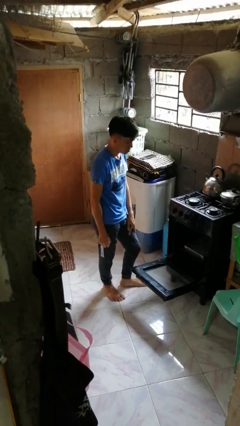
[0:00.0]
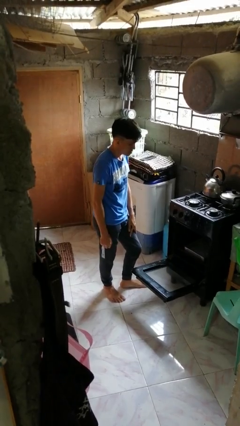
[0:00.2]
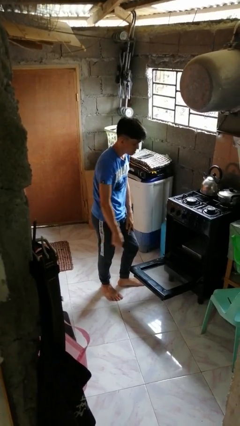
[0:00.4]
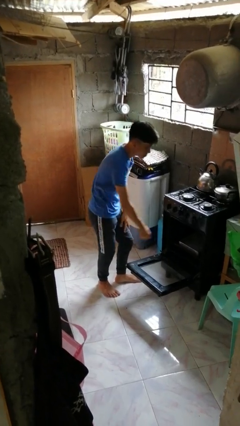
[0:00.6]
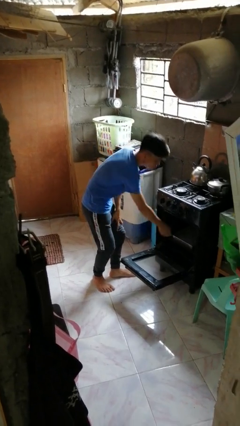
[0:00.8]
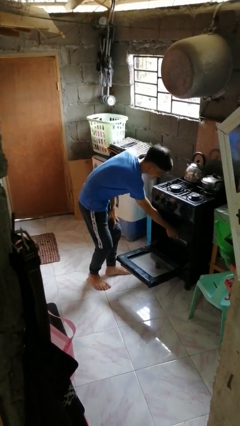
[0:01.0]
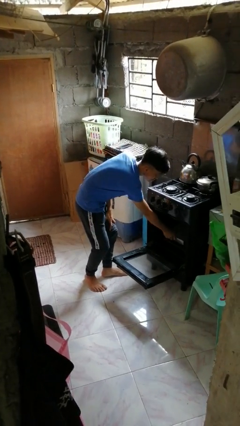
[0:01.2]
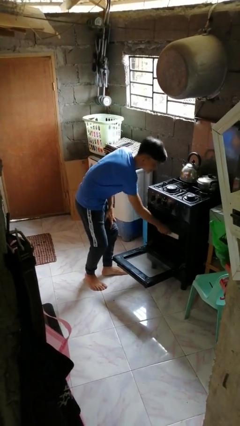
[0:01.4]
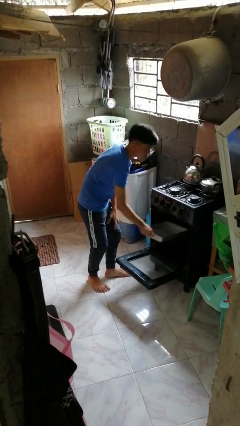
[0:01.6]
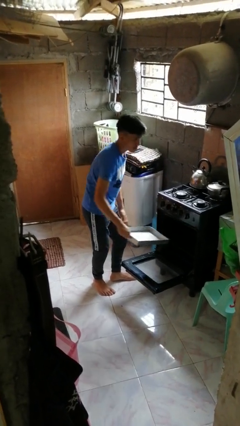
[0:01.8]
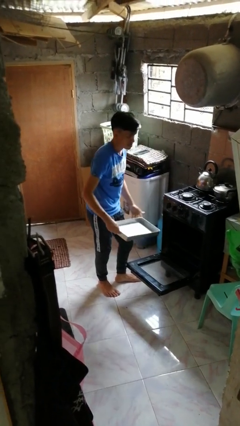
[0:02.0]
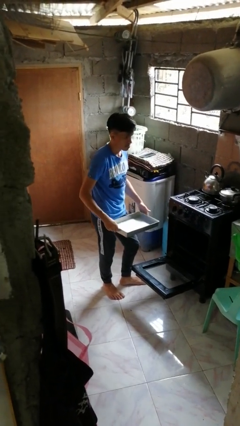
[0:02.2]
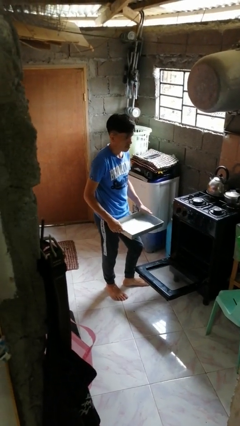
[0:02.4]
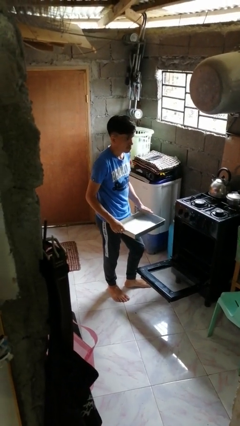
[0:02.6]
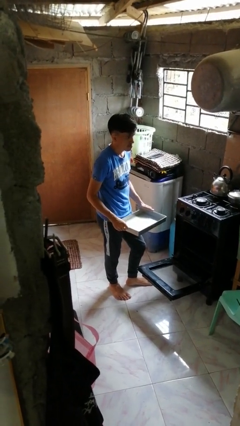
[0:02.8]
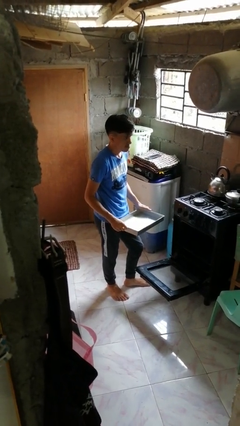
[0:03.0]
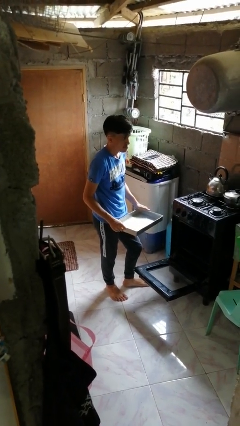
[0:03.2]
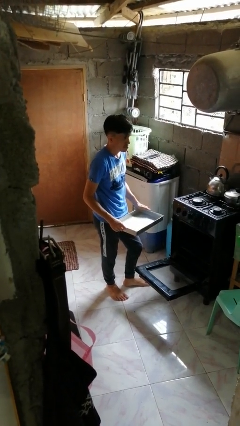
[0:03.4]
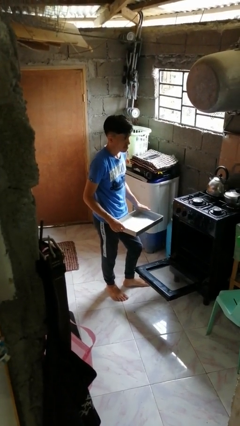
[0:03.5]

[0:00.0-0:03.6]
person takes object from oven

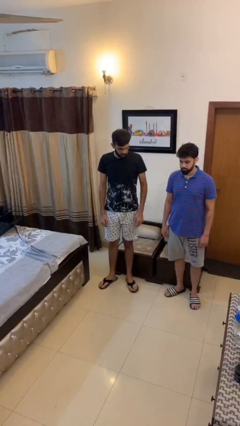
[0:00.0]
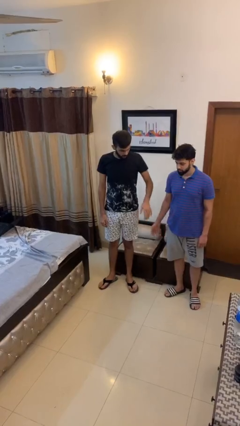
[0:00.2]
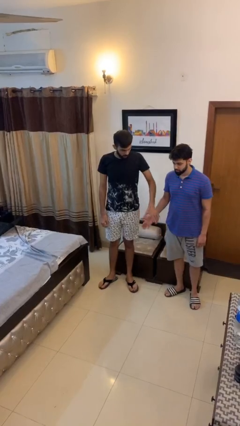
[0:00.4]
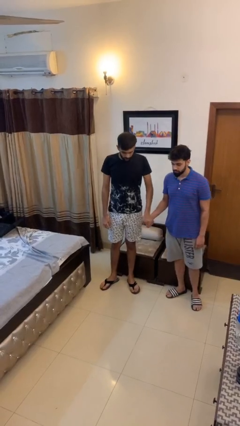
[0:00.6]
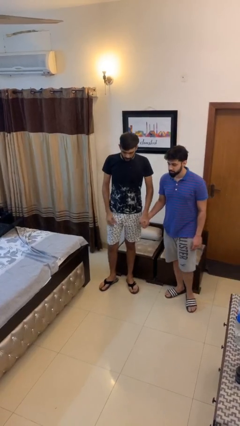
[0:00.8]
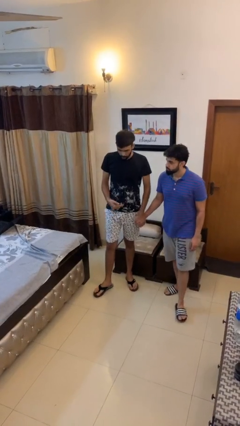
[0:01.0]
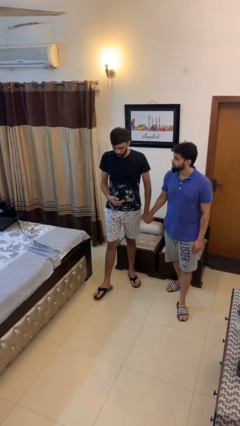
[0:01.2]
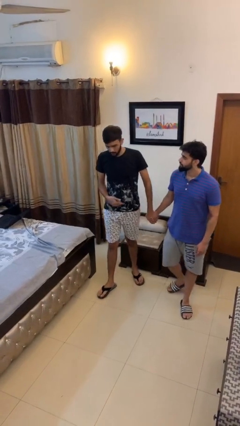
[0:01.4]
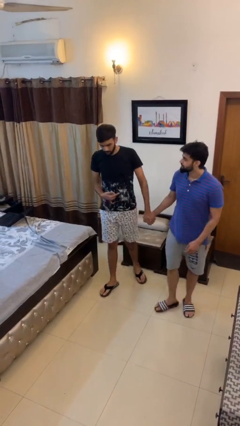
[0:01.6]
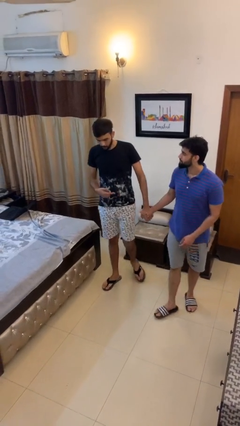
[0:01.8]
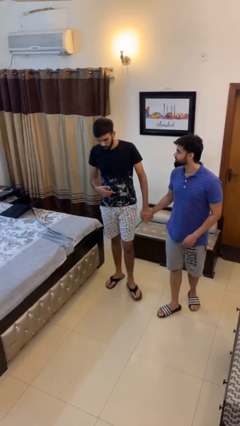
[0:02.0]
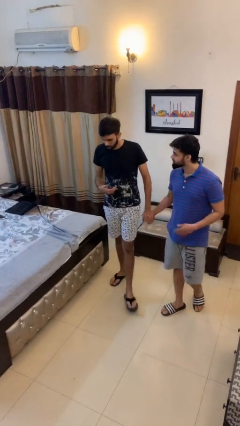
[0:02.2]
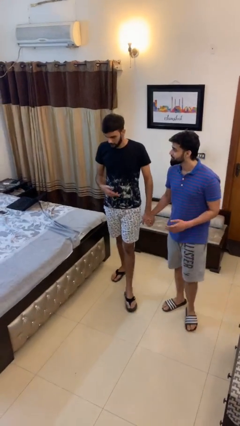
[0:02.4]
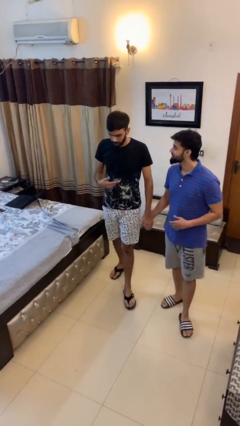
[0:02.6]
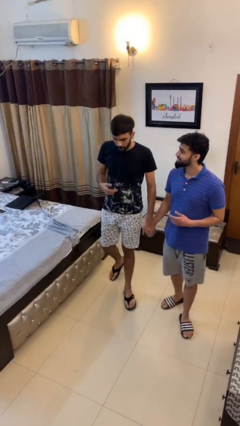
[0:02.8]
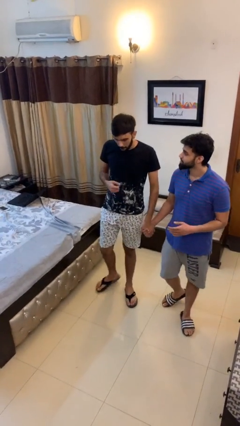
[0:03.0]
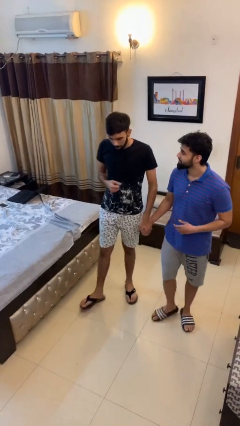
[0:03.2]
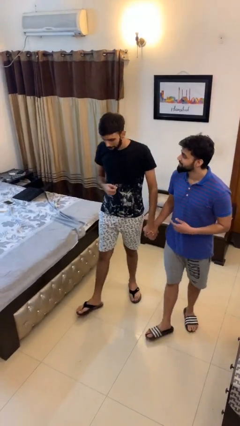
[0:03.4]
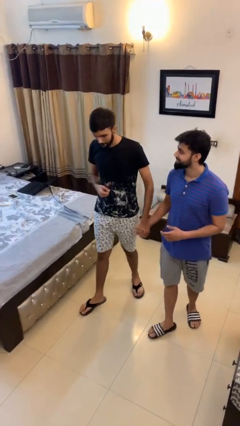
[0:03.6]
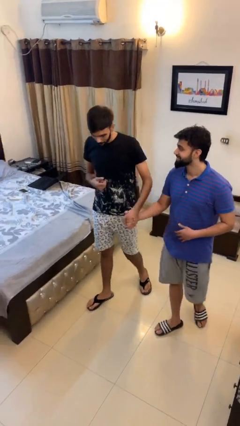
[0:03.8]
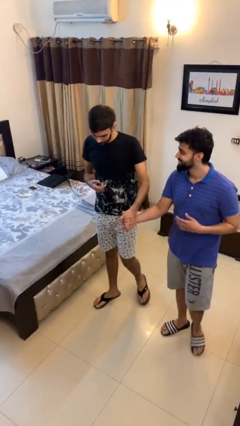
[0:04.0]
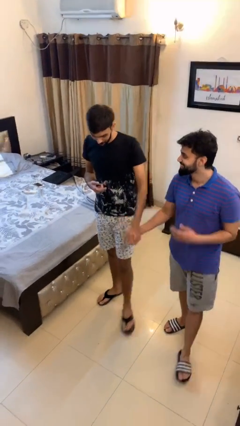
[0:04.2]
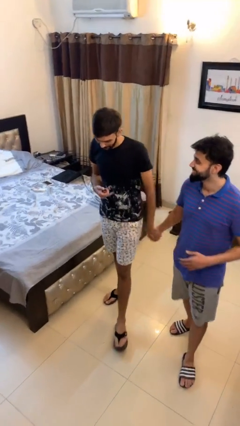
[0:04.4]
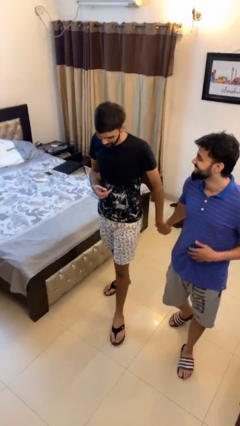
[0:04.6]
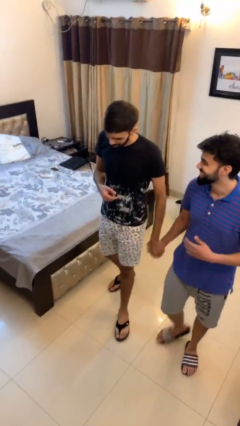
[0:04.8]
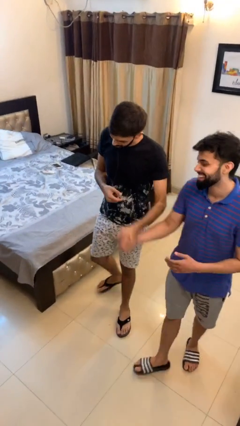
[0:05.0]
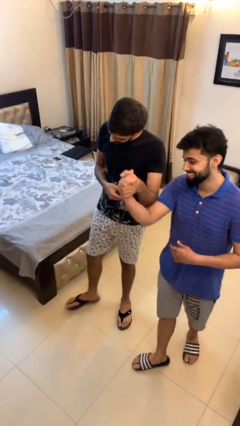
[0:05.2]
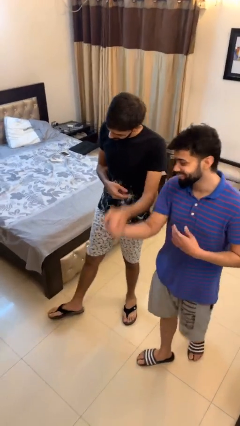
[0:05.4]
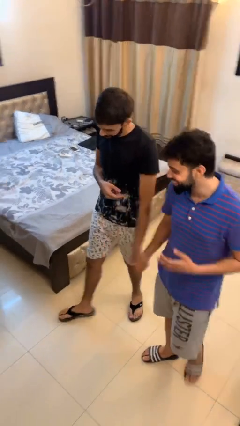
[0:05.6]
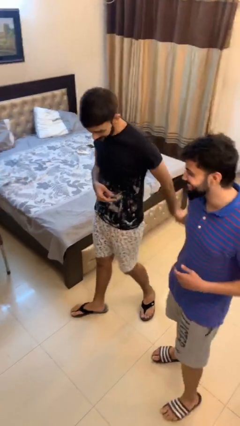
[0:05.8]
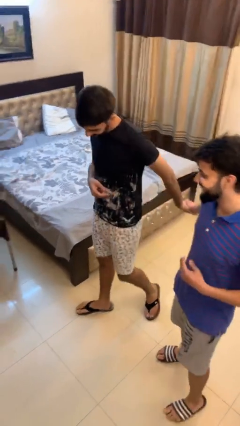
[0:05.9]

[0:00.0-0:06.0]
person holds hand

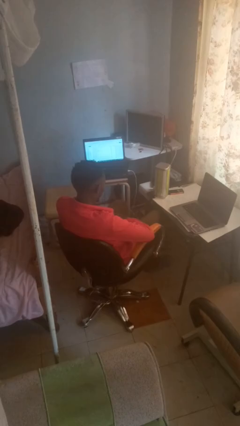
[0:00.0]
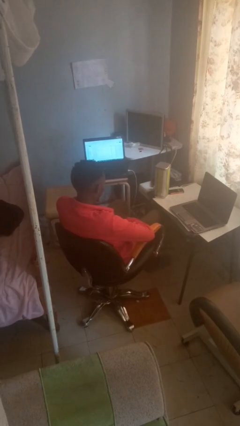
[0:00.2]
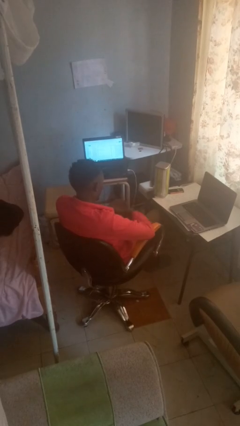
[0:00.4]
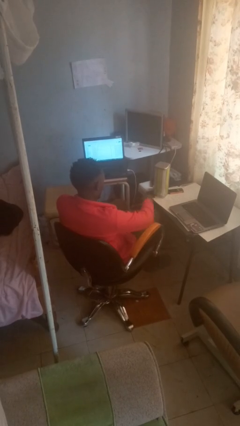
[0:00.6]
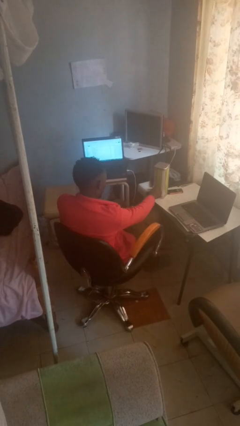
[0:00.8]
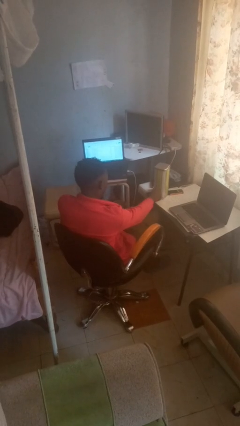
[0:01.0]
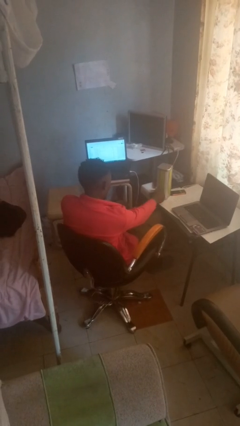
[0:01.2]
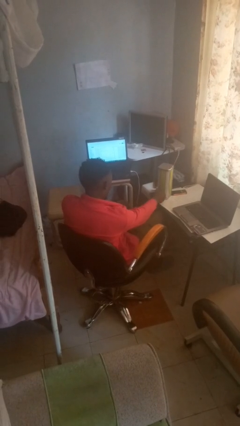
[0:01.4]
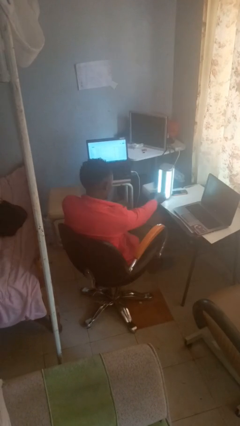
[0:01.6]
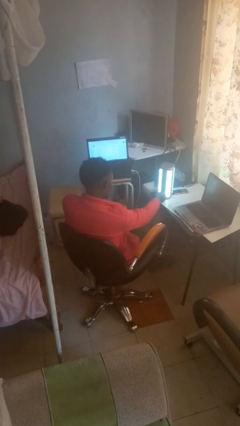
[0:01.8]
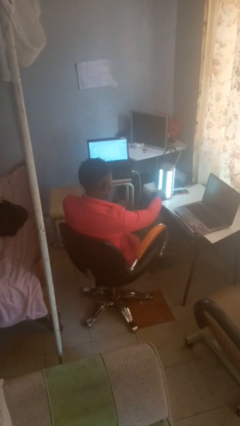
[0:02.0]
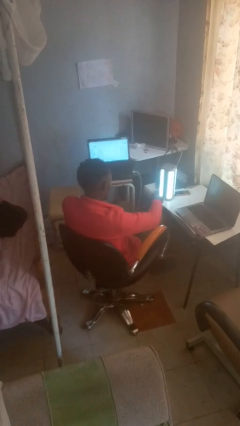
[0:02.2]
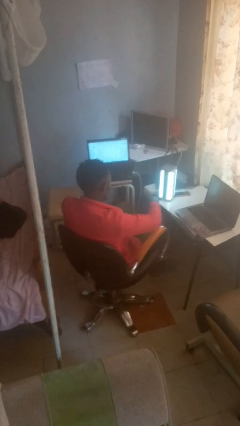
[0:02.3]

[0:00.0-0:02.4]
person turns on lamp

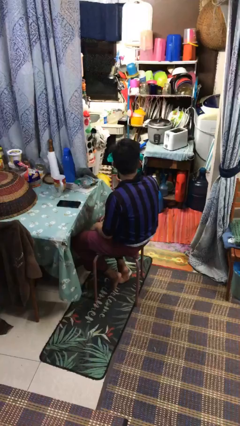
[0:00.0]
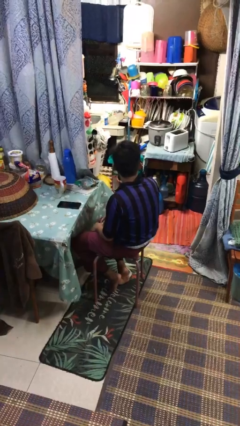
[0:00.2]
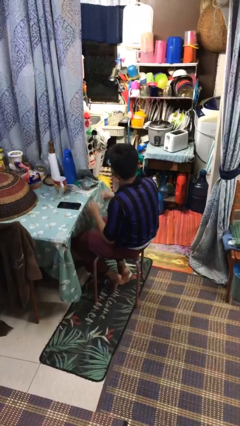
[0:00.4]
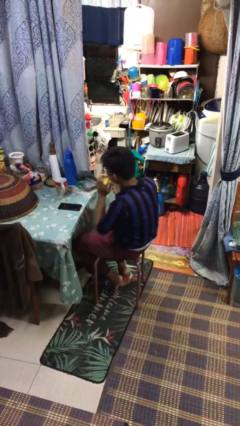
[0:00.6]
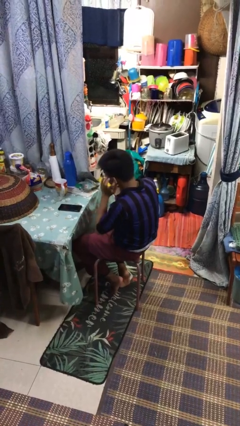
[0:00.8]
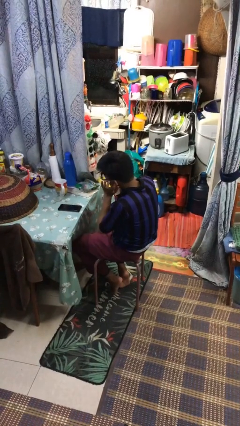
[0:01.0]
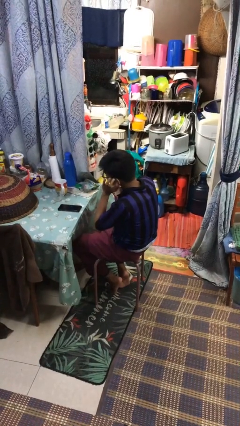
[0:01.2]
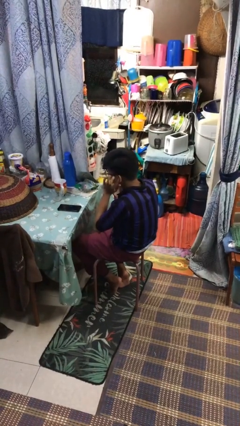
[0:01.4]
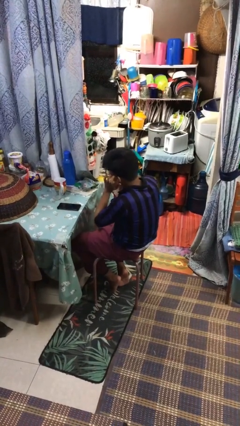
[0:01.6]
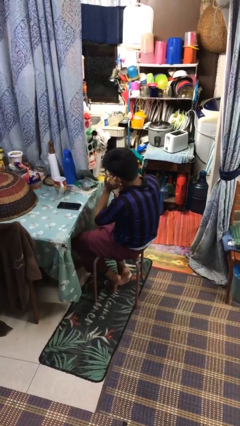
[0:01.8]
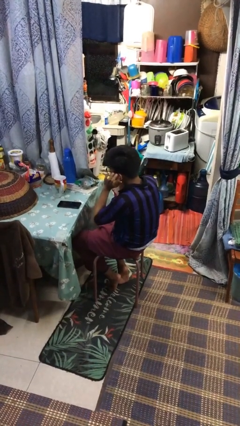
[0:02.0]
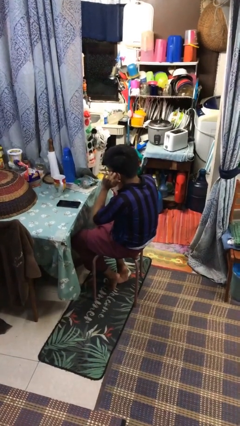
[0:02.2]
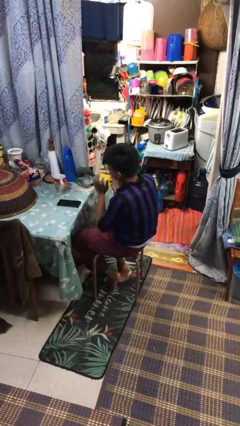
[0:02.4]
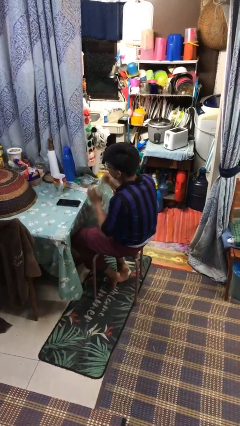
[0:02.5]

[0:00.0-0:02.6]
person puts fingers in ear

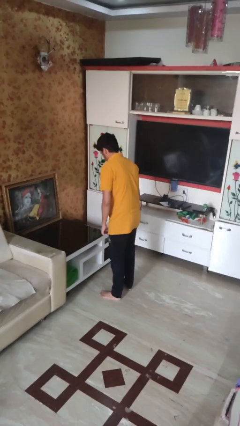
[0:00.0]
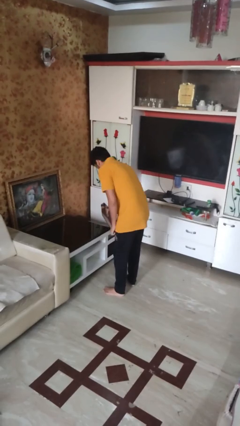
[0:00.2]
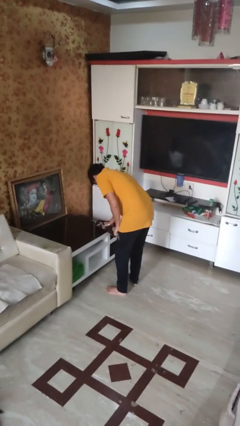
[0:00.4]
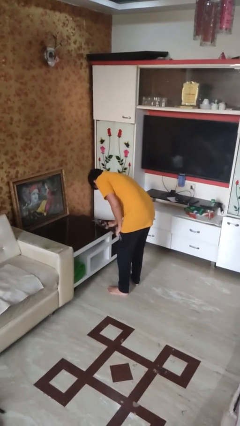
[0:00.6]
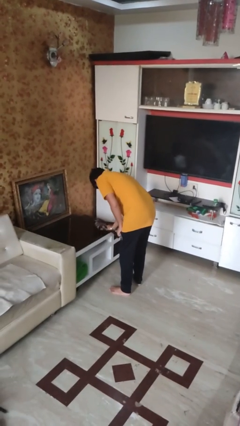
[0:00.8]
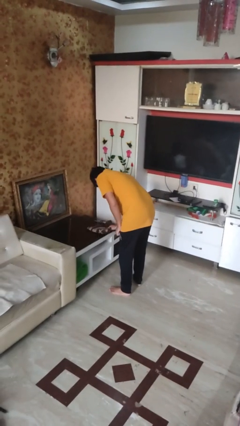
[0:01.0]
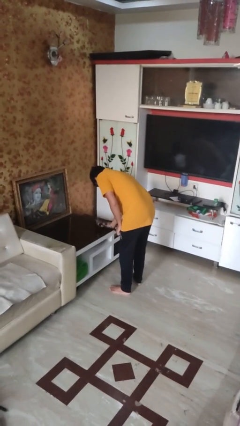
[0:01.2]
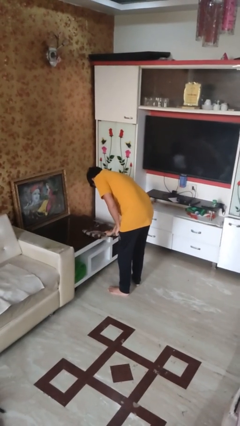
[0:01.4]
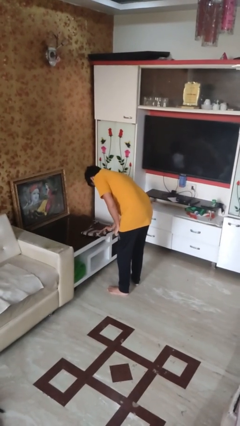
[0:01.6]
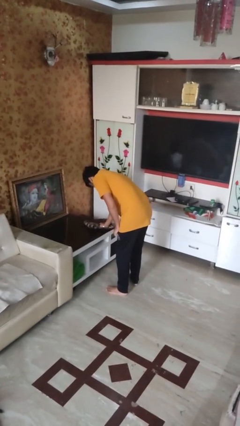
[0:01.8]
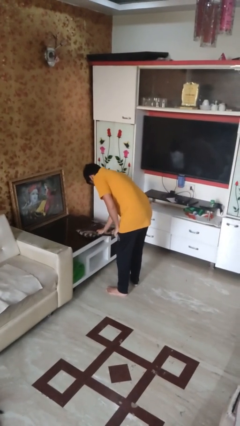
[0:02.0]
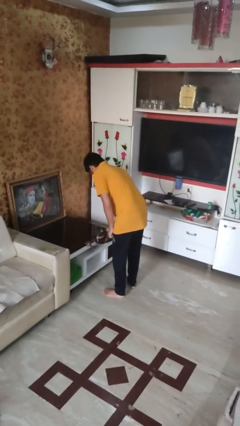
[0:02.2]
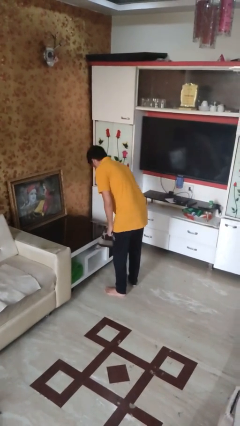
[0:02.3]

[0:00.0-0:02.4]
person cleans table with rag

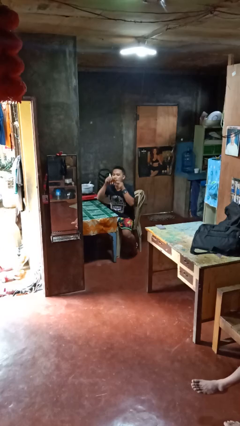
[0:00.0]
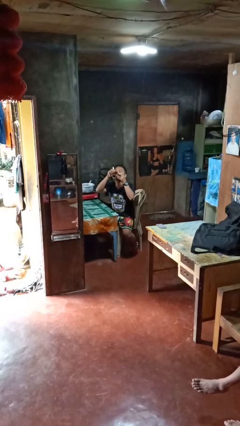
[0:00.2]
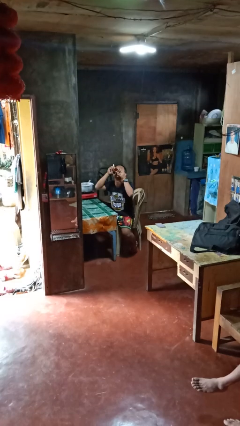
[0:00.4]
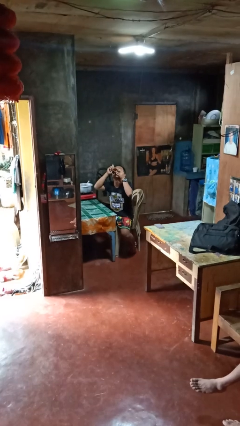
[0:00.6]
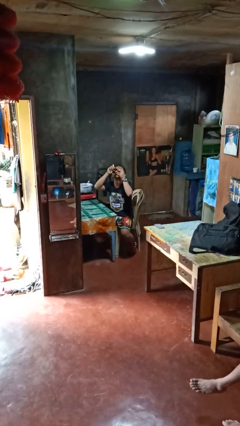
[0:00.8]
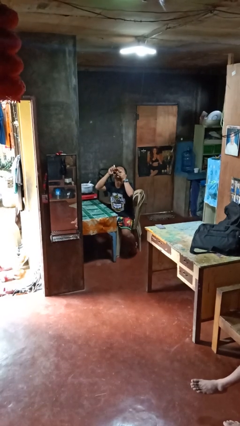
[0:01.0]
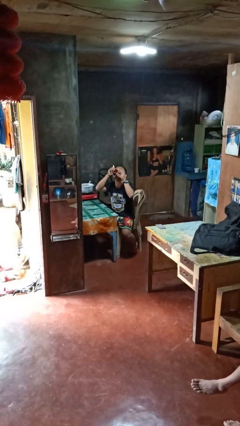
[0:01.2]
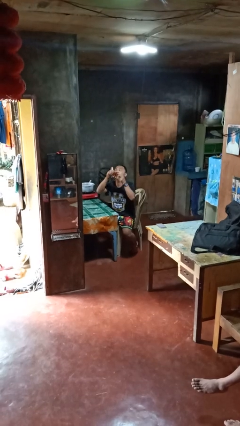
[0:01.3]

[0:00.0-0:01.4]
person drinks from mug
